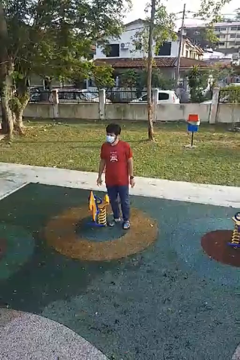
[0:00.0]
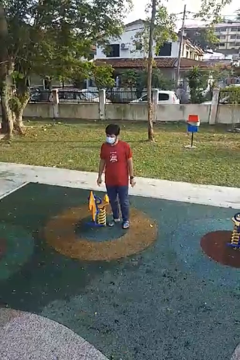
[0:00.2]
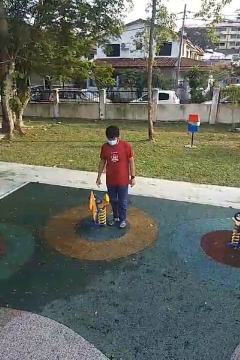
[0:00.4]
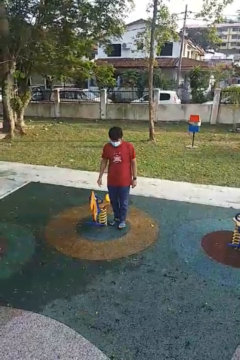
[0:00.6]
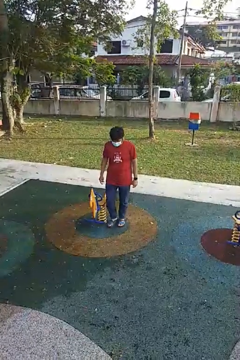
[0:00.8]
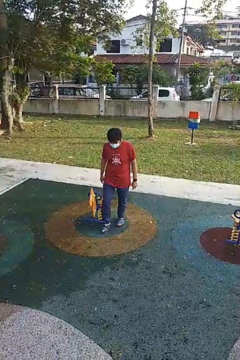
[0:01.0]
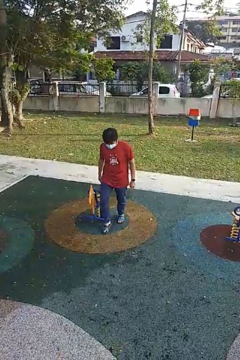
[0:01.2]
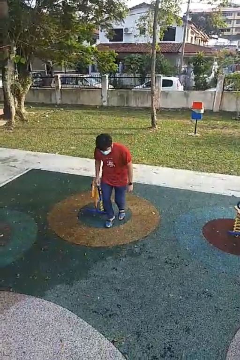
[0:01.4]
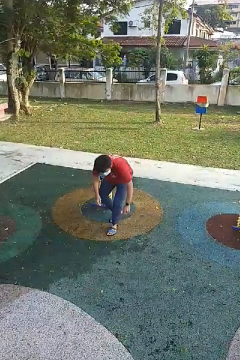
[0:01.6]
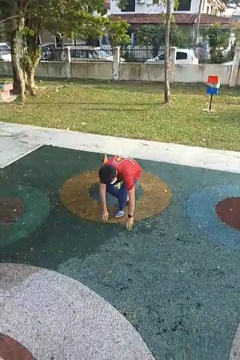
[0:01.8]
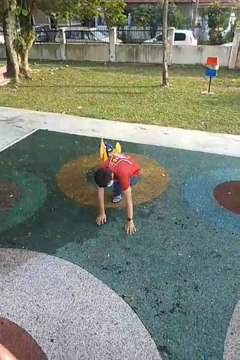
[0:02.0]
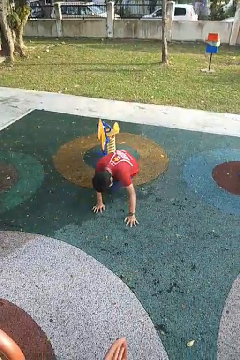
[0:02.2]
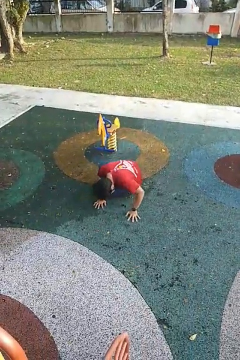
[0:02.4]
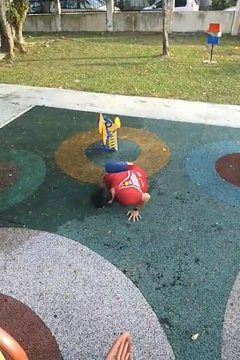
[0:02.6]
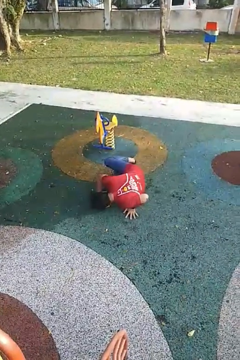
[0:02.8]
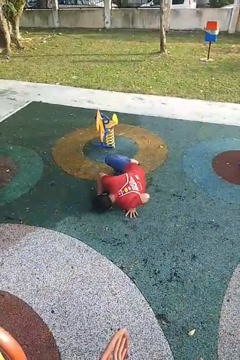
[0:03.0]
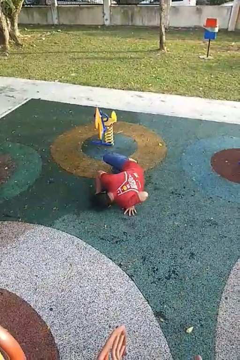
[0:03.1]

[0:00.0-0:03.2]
person trips on object on floor

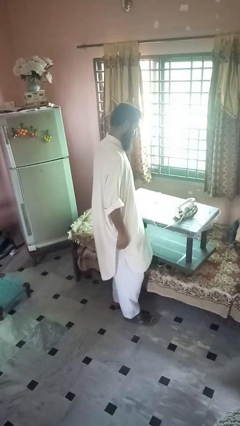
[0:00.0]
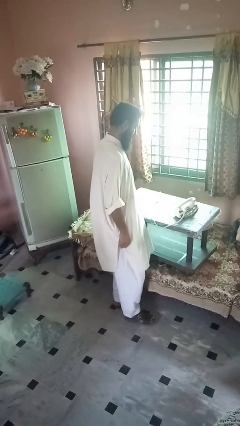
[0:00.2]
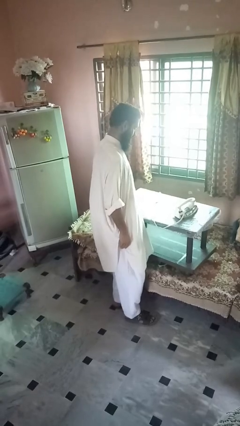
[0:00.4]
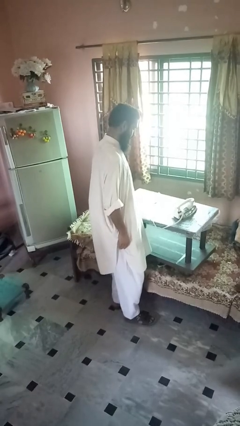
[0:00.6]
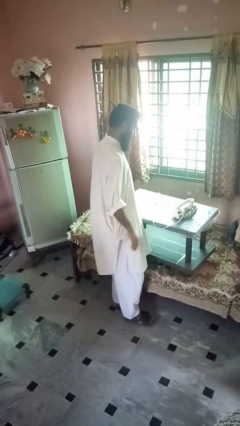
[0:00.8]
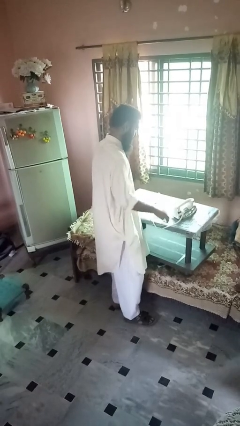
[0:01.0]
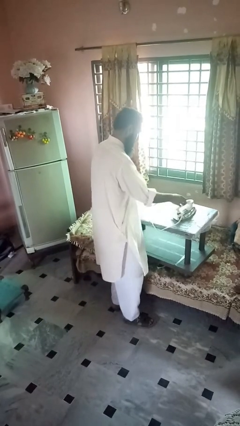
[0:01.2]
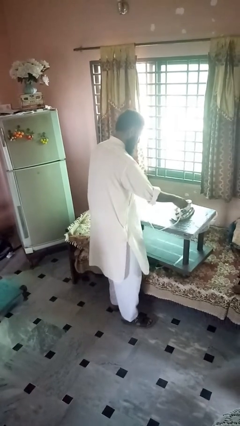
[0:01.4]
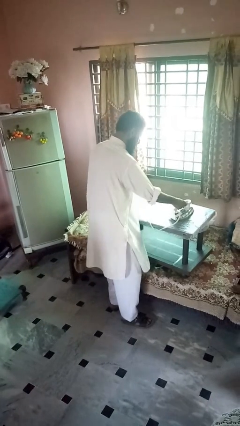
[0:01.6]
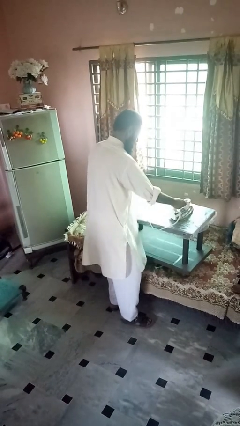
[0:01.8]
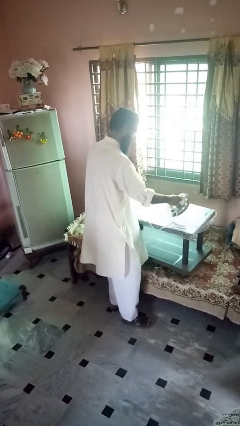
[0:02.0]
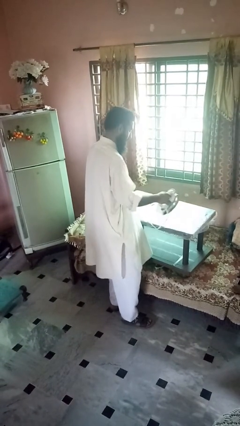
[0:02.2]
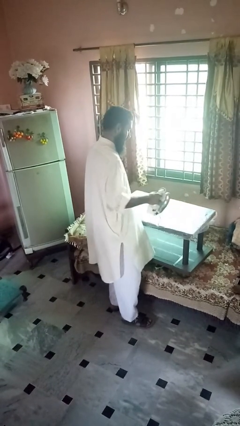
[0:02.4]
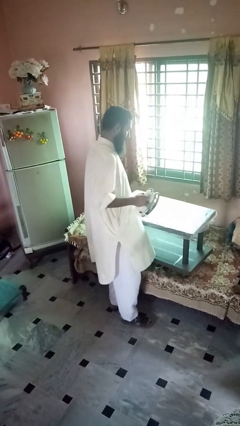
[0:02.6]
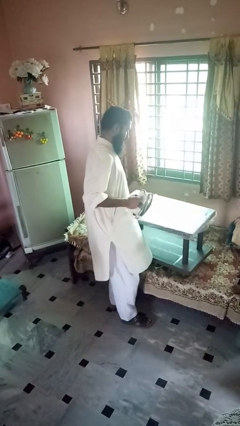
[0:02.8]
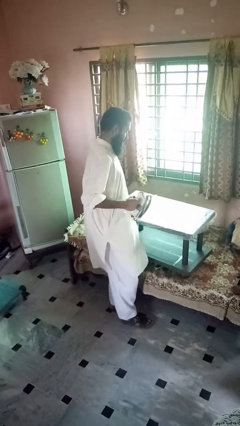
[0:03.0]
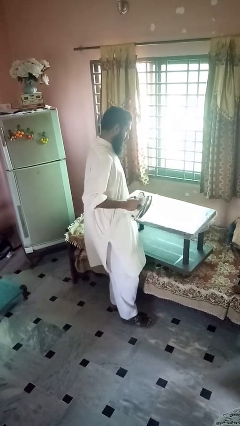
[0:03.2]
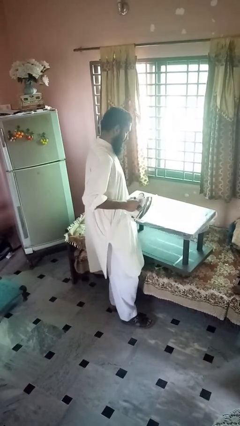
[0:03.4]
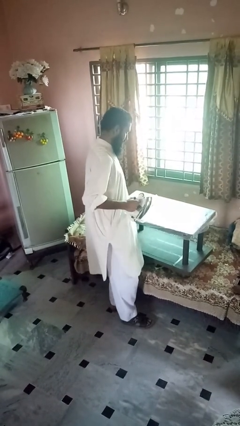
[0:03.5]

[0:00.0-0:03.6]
person picks up object from countertop

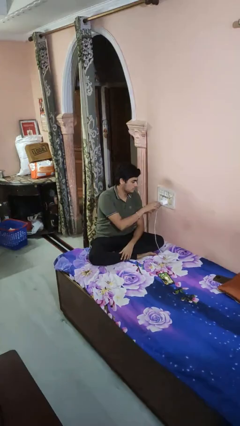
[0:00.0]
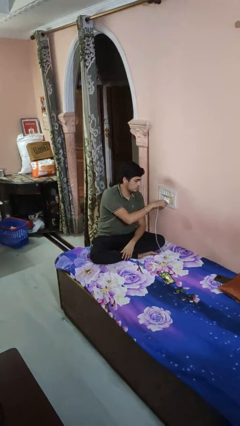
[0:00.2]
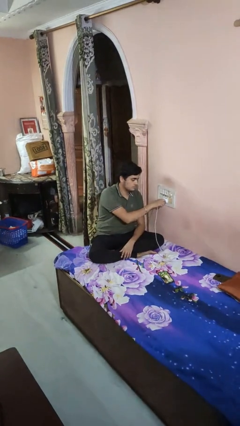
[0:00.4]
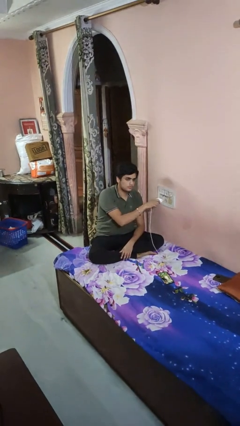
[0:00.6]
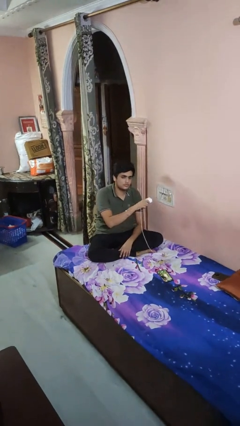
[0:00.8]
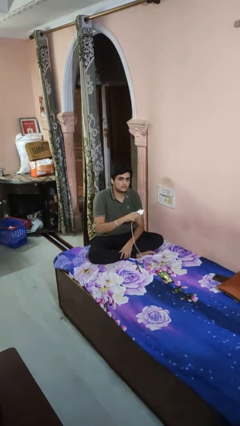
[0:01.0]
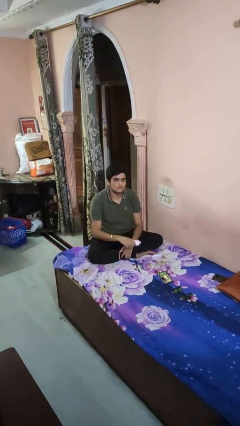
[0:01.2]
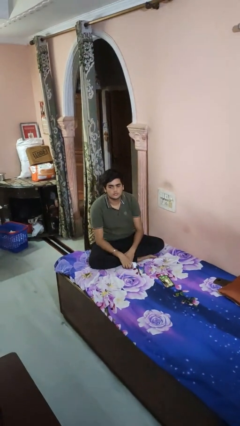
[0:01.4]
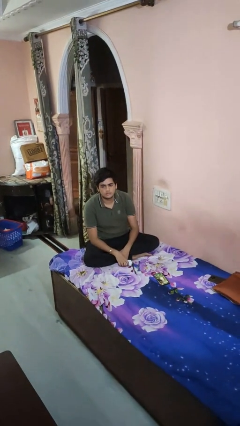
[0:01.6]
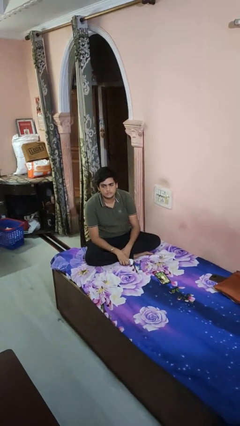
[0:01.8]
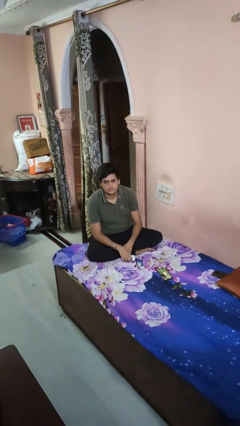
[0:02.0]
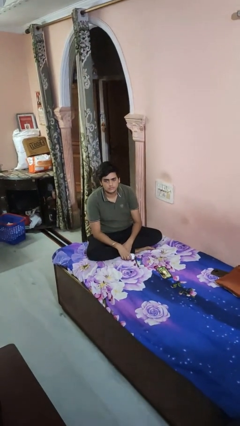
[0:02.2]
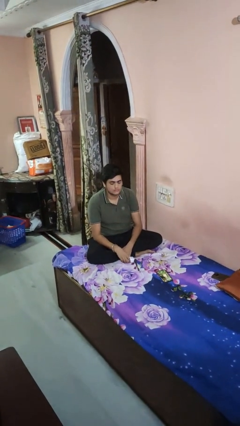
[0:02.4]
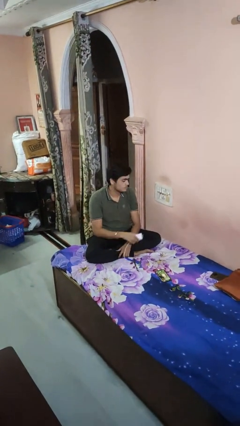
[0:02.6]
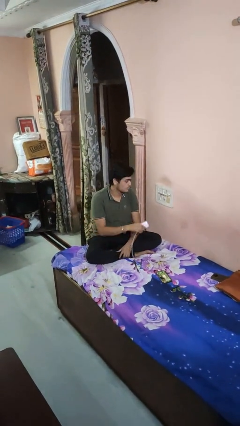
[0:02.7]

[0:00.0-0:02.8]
person unplugs from electrical socket

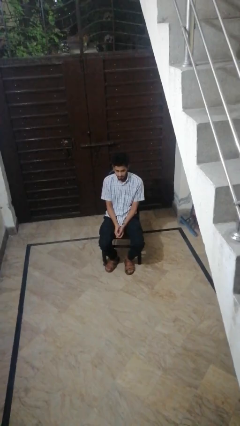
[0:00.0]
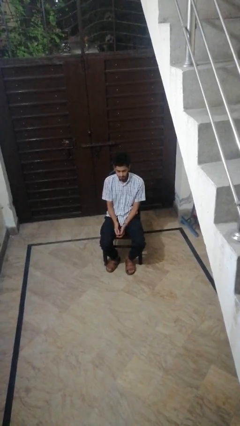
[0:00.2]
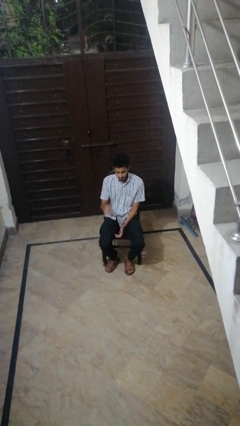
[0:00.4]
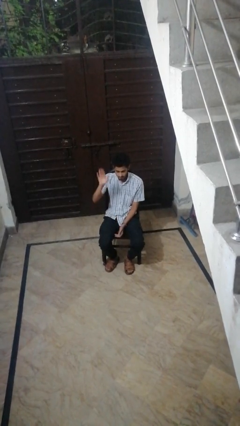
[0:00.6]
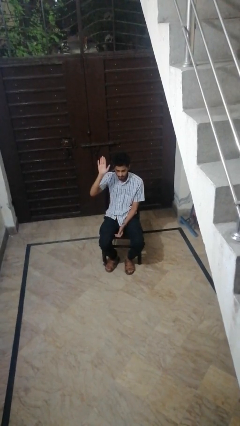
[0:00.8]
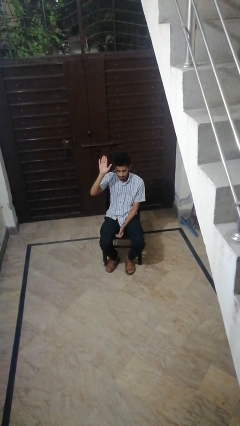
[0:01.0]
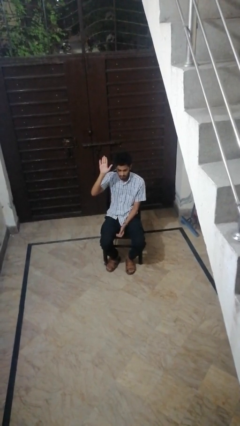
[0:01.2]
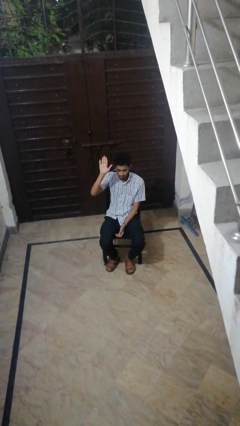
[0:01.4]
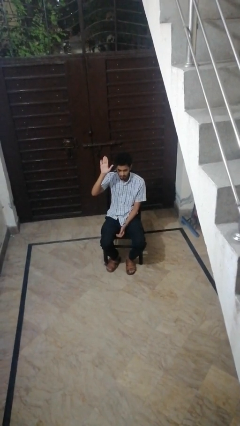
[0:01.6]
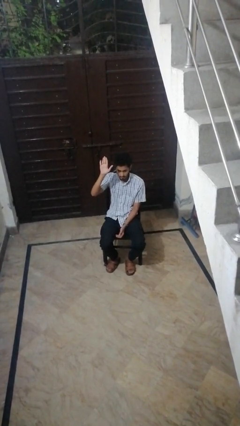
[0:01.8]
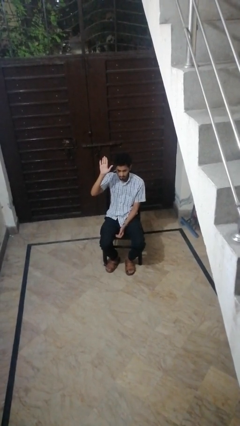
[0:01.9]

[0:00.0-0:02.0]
person gestures raise hand

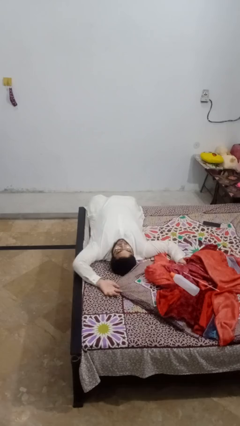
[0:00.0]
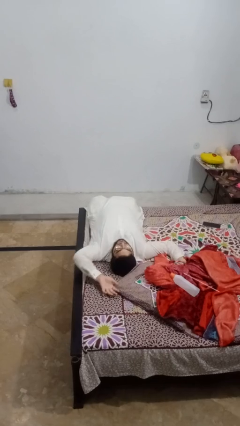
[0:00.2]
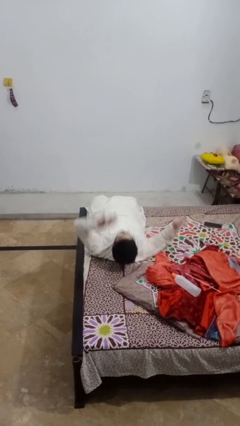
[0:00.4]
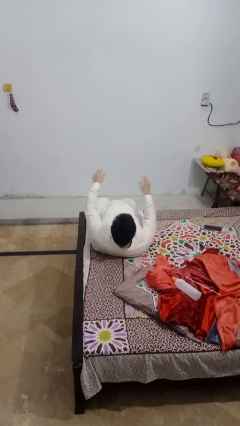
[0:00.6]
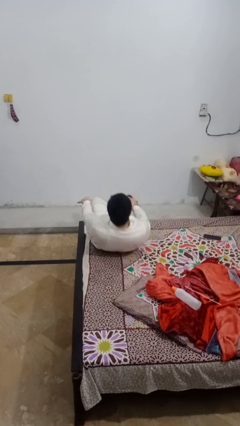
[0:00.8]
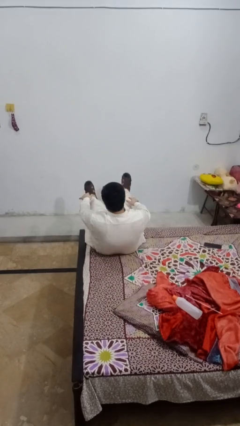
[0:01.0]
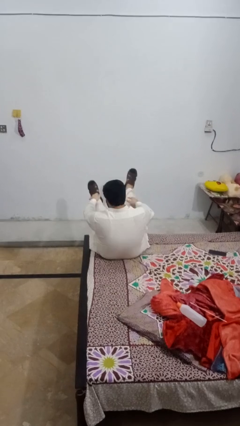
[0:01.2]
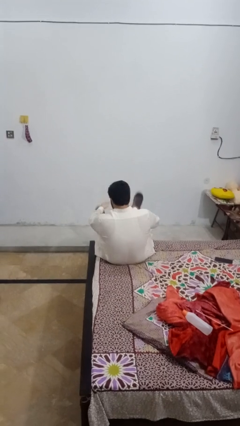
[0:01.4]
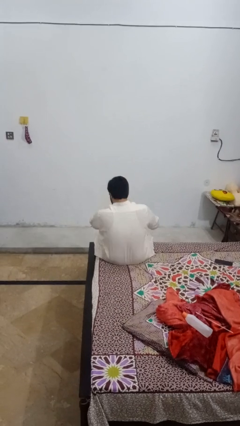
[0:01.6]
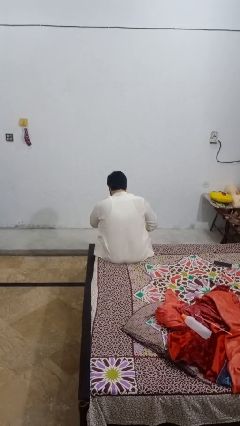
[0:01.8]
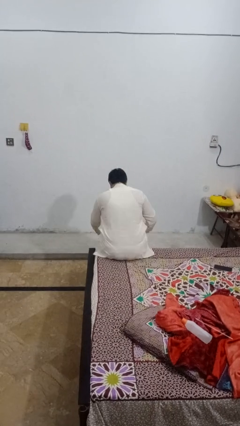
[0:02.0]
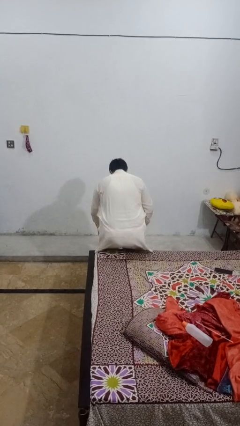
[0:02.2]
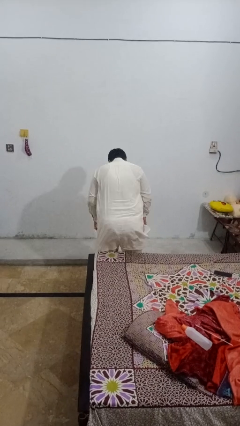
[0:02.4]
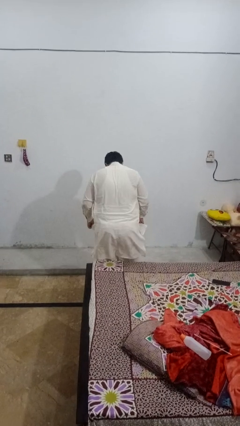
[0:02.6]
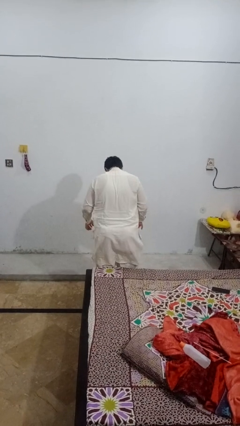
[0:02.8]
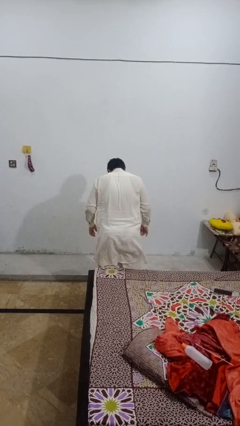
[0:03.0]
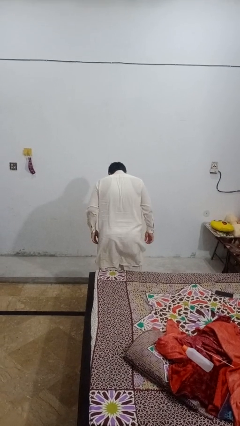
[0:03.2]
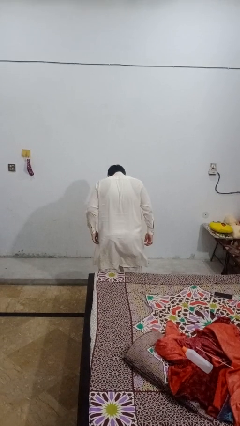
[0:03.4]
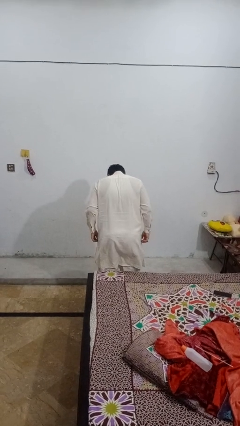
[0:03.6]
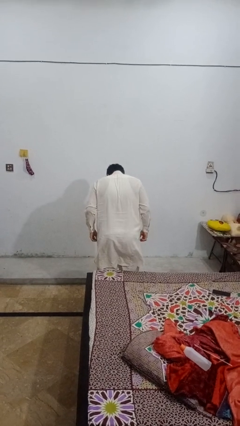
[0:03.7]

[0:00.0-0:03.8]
person stands up

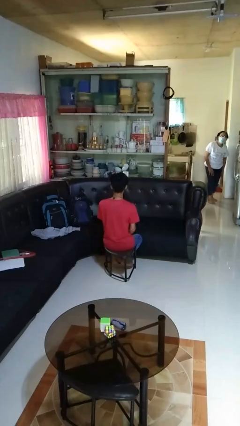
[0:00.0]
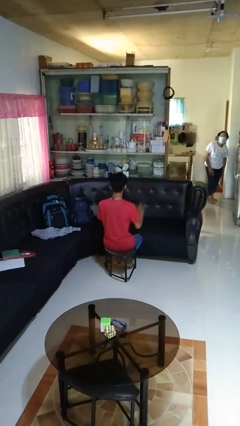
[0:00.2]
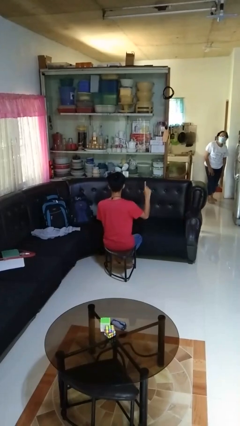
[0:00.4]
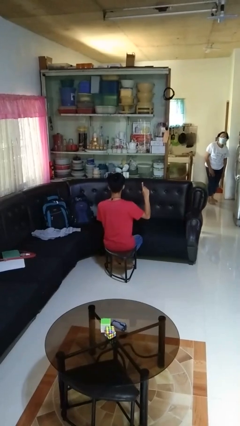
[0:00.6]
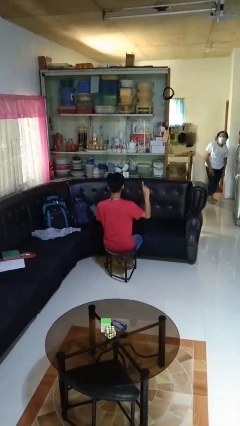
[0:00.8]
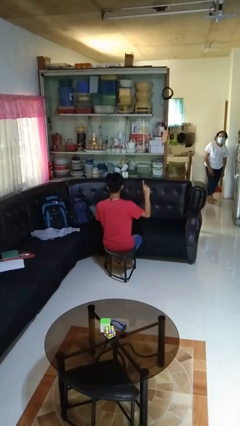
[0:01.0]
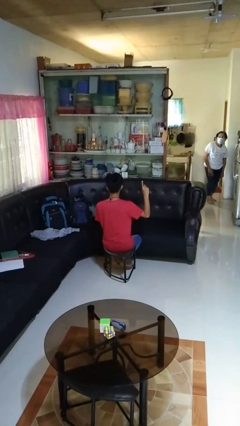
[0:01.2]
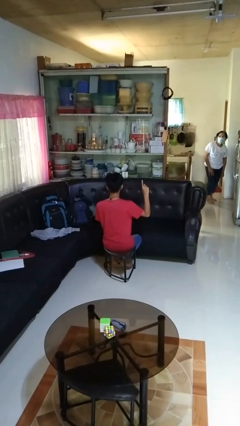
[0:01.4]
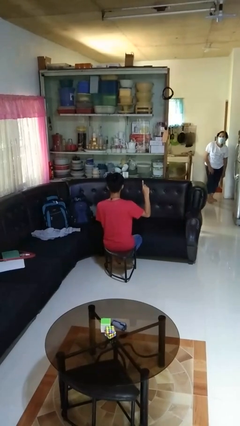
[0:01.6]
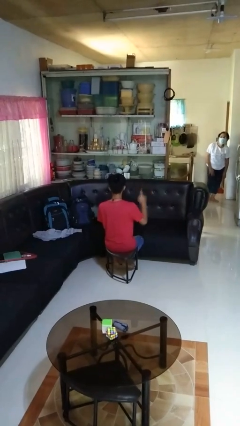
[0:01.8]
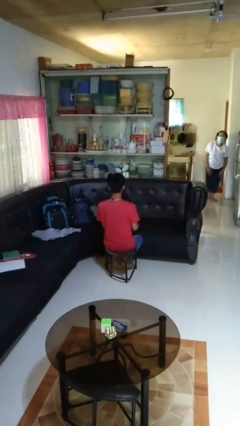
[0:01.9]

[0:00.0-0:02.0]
person gestures number one

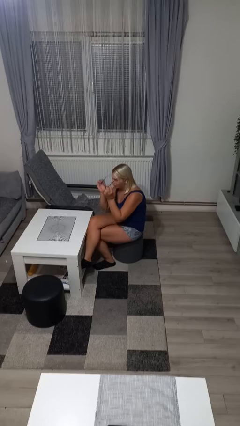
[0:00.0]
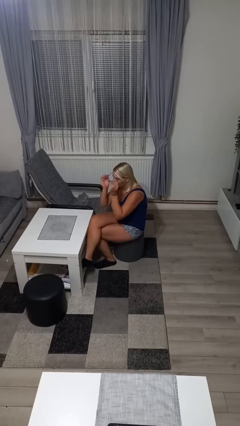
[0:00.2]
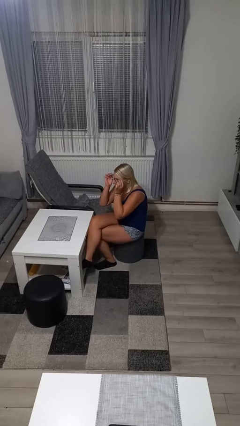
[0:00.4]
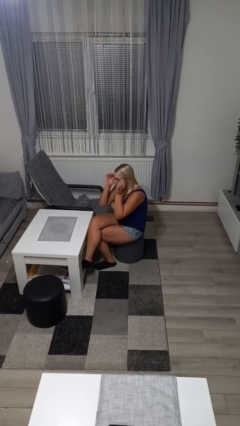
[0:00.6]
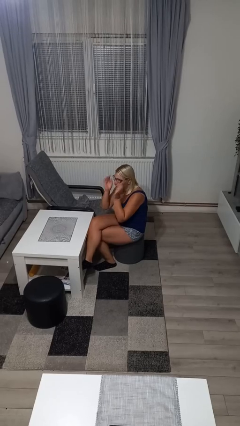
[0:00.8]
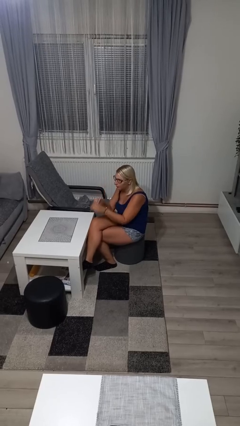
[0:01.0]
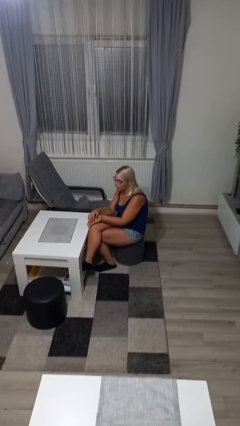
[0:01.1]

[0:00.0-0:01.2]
person puts on glasses
